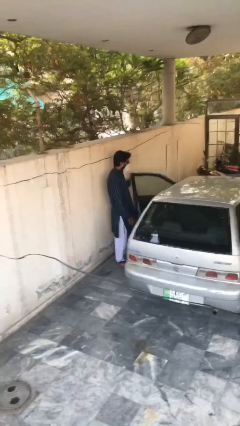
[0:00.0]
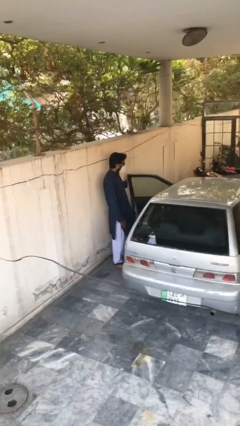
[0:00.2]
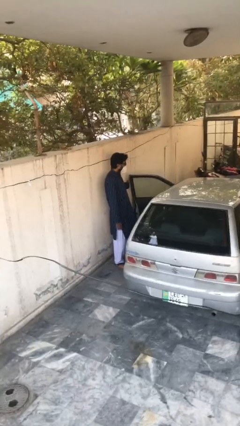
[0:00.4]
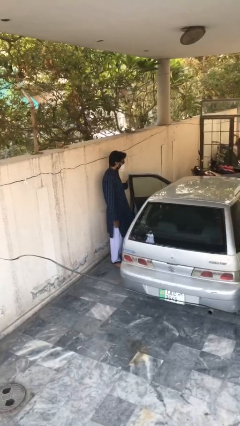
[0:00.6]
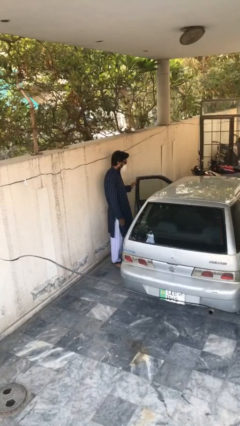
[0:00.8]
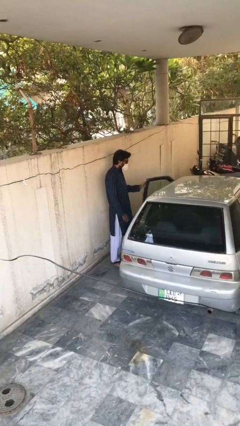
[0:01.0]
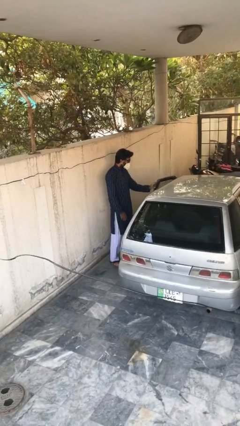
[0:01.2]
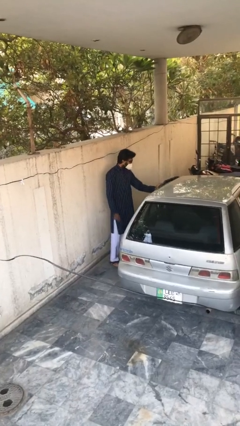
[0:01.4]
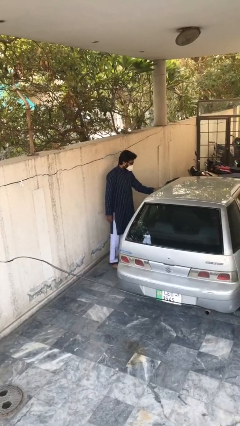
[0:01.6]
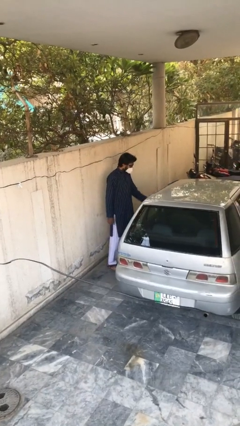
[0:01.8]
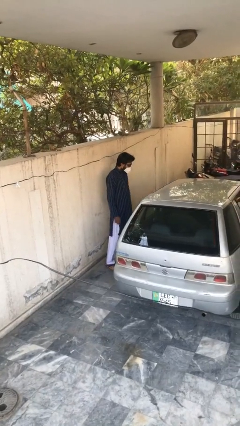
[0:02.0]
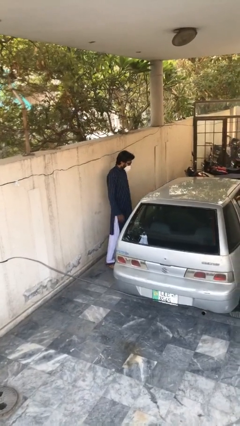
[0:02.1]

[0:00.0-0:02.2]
person closes car door

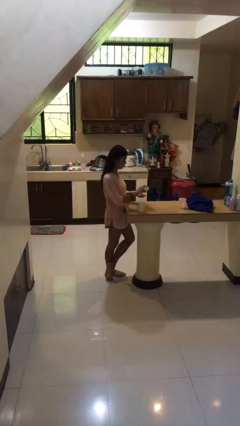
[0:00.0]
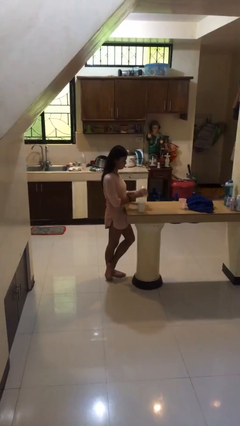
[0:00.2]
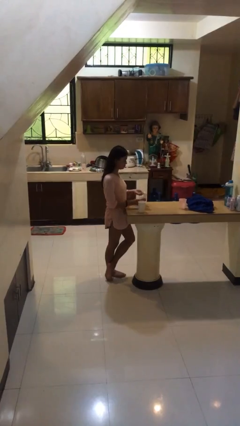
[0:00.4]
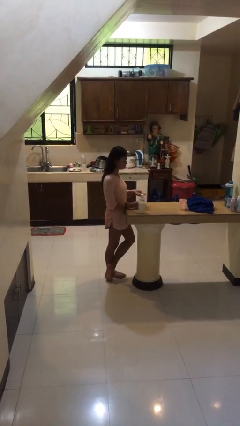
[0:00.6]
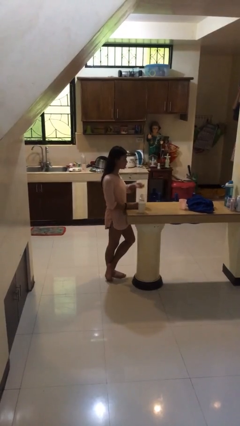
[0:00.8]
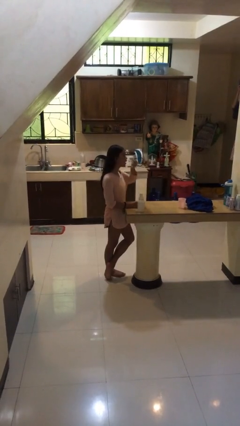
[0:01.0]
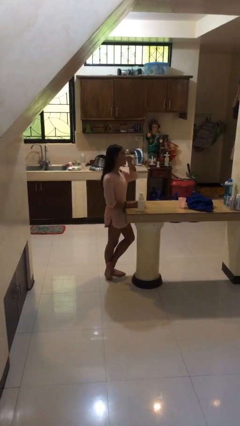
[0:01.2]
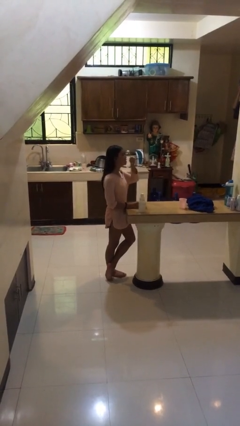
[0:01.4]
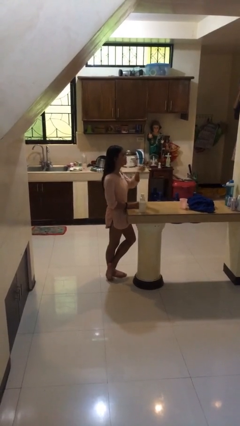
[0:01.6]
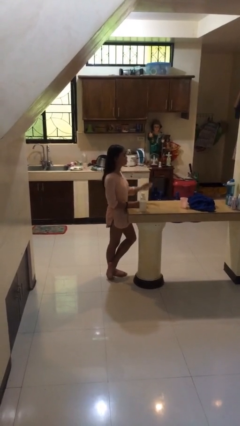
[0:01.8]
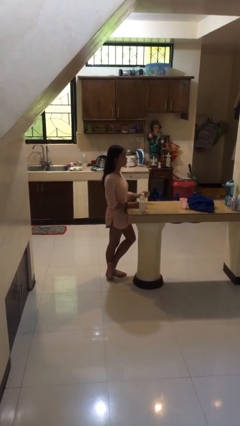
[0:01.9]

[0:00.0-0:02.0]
person takes medicine pills

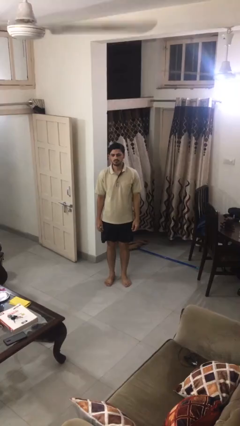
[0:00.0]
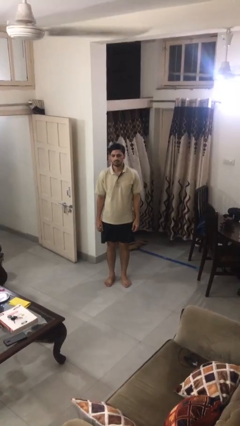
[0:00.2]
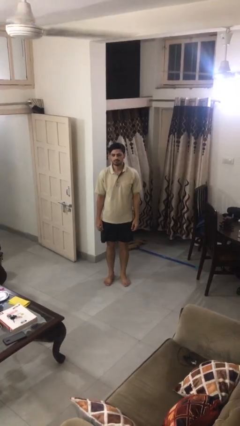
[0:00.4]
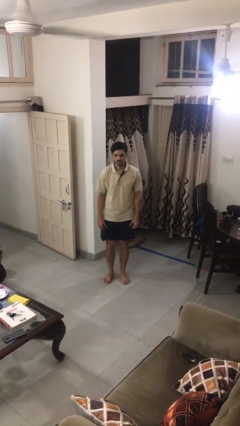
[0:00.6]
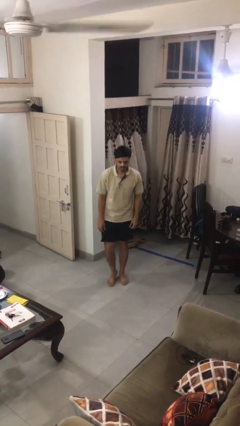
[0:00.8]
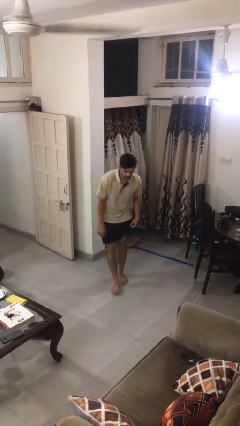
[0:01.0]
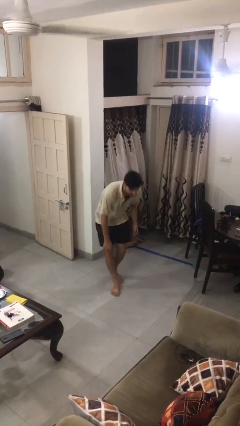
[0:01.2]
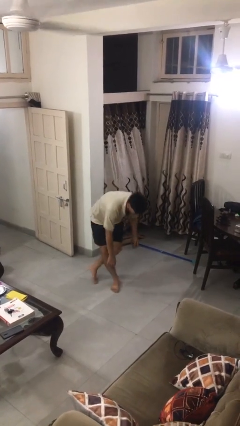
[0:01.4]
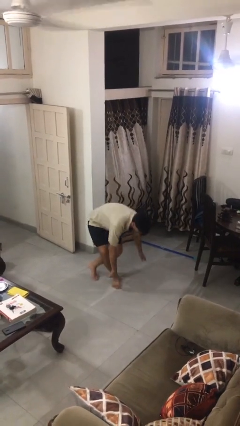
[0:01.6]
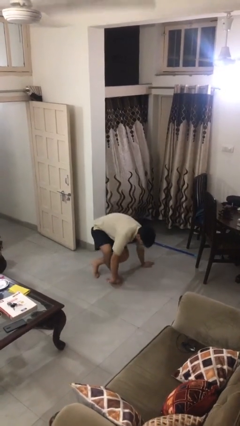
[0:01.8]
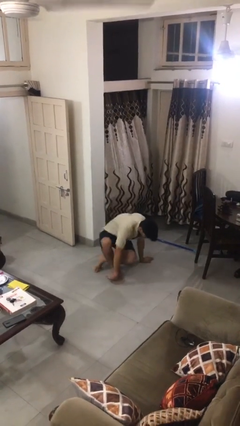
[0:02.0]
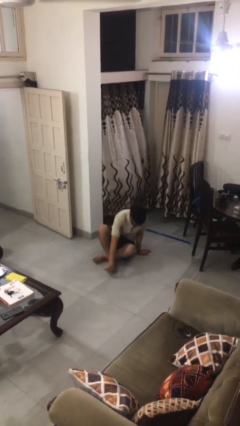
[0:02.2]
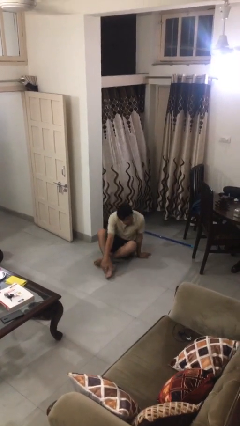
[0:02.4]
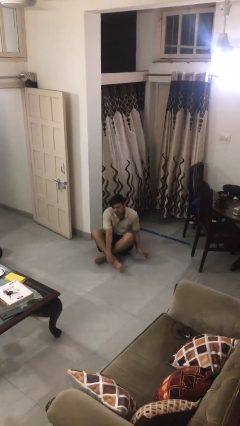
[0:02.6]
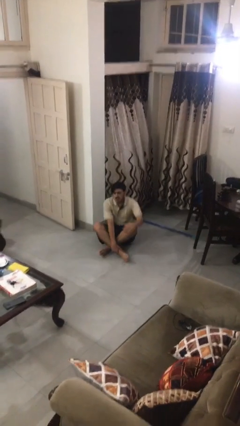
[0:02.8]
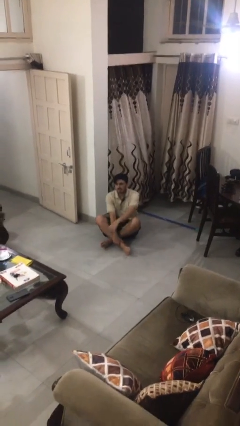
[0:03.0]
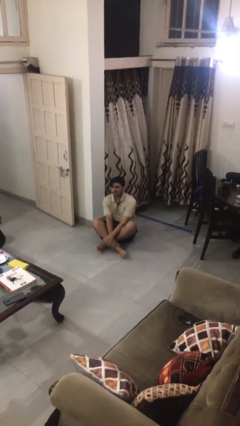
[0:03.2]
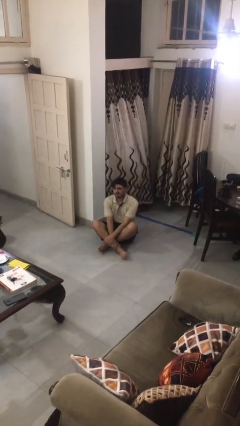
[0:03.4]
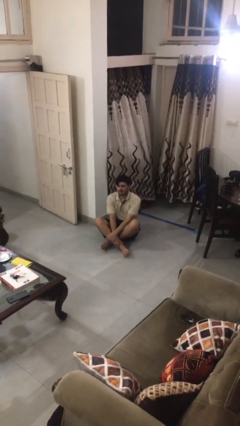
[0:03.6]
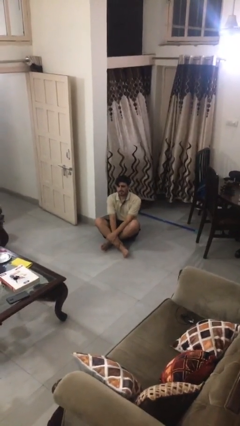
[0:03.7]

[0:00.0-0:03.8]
person sits crisscross

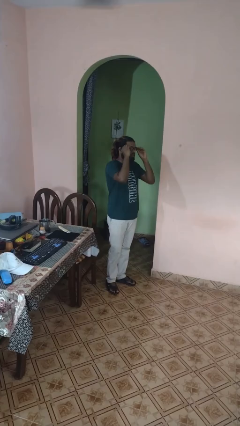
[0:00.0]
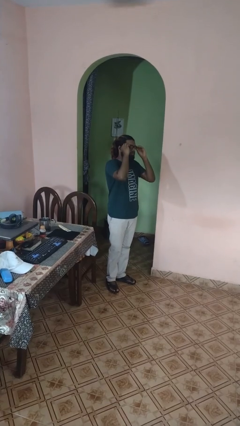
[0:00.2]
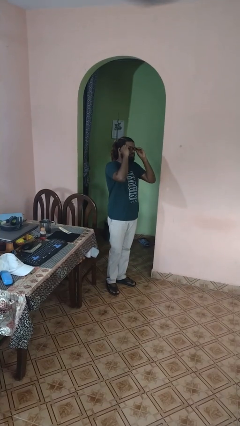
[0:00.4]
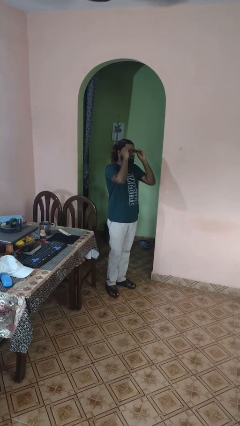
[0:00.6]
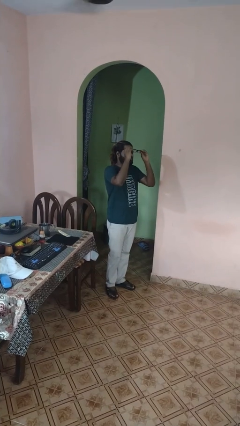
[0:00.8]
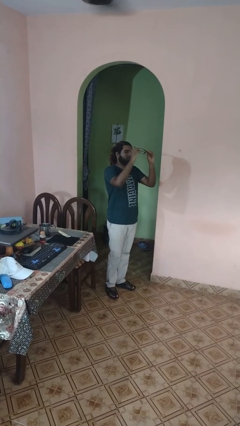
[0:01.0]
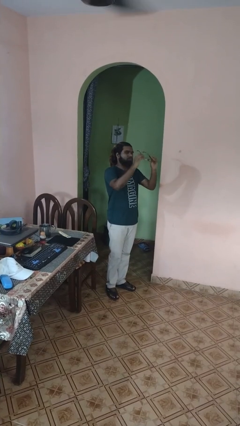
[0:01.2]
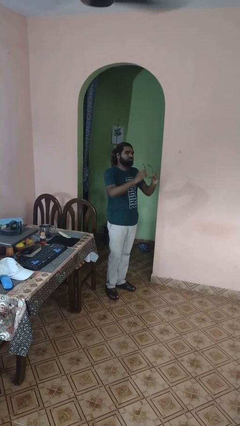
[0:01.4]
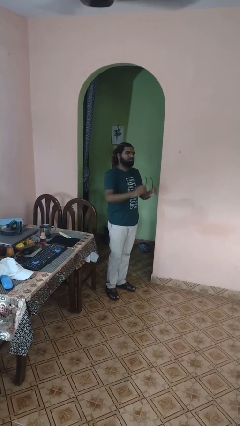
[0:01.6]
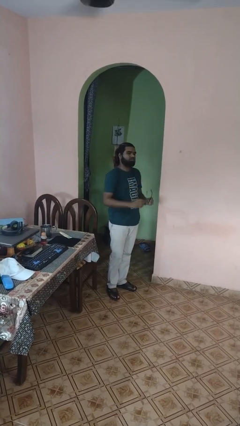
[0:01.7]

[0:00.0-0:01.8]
person takes off glasses

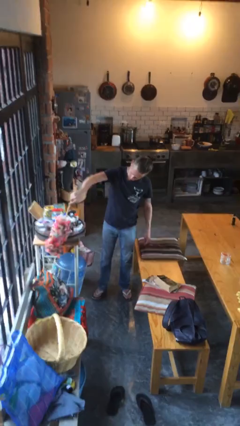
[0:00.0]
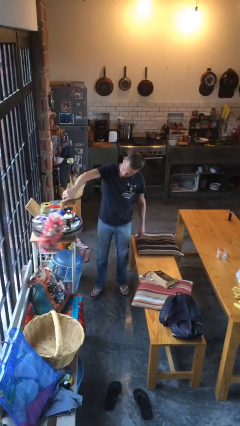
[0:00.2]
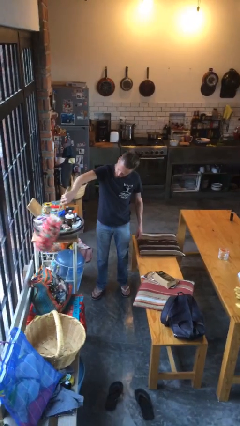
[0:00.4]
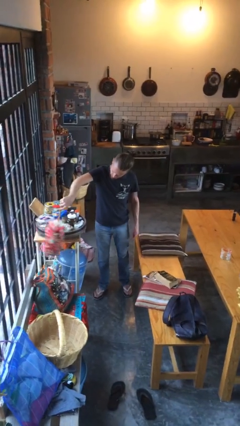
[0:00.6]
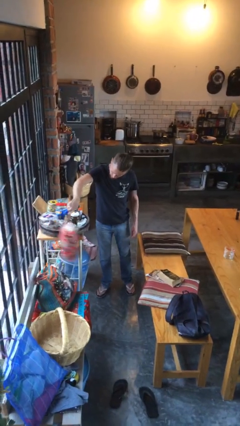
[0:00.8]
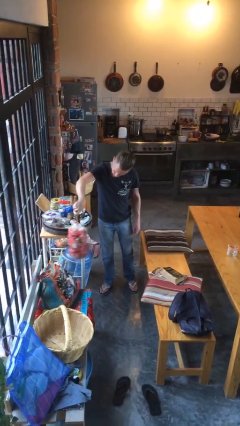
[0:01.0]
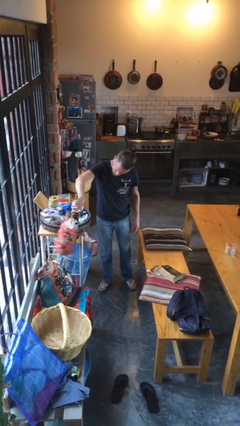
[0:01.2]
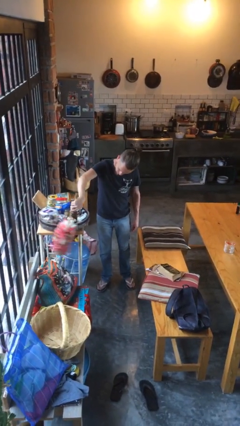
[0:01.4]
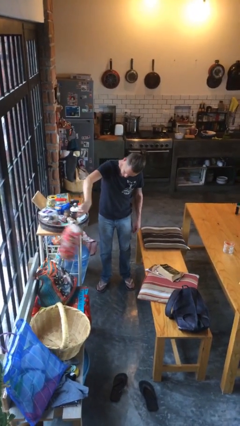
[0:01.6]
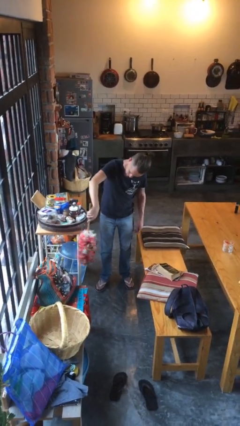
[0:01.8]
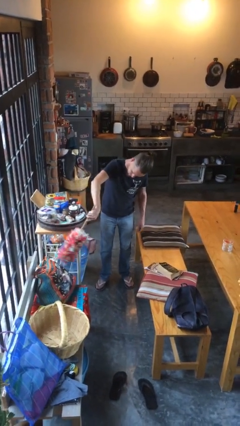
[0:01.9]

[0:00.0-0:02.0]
person dusts furniture

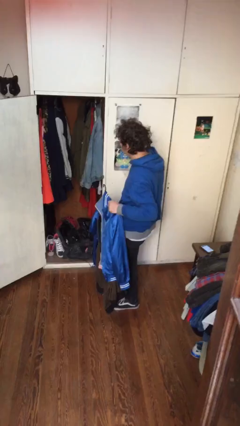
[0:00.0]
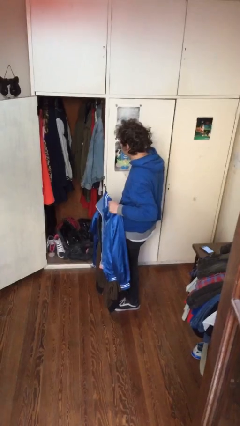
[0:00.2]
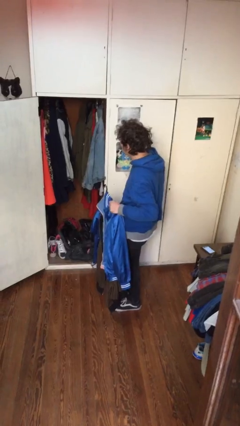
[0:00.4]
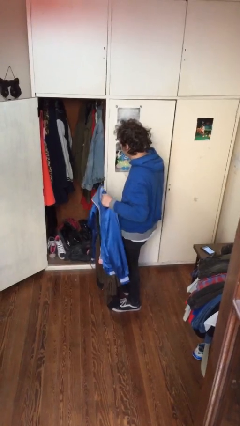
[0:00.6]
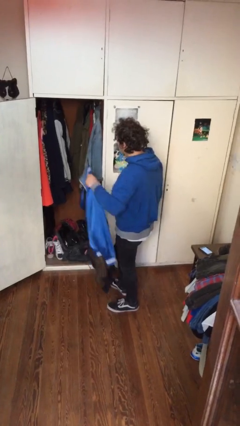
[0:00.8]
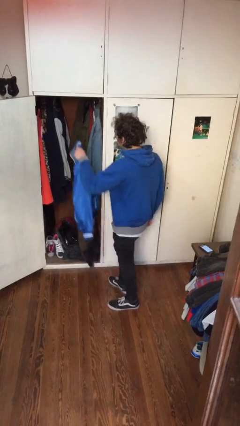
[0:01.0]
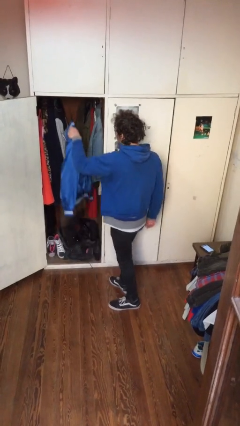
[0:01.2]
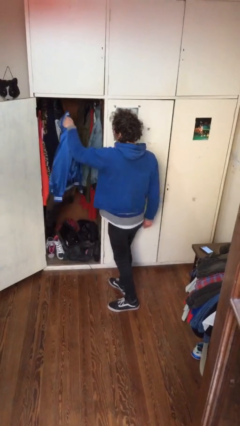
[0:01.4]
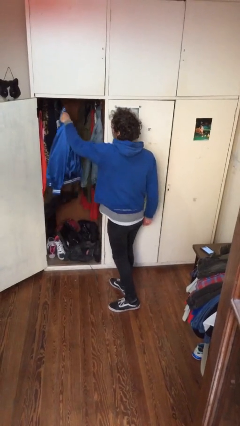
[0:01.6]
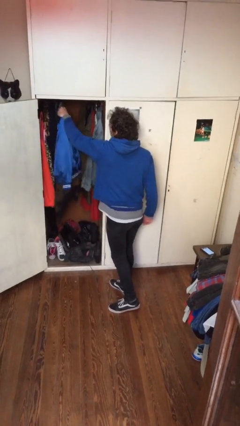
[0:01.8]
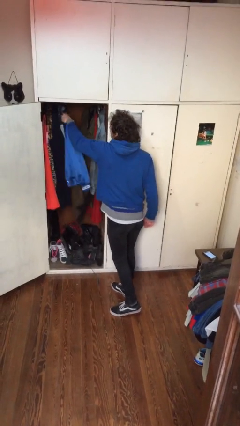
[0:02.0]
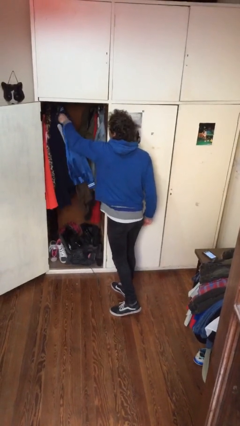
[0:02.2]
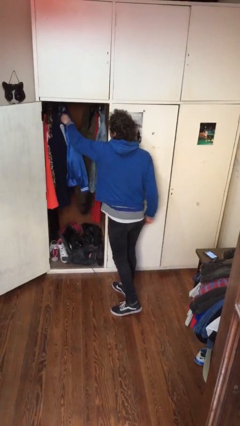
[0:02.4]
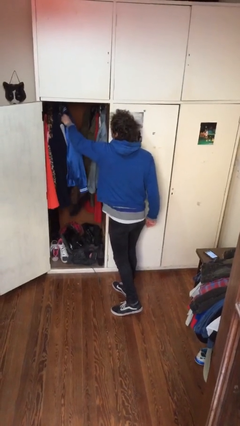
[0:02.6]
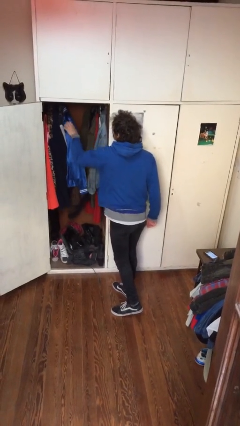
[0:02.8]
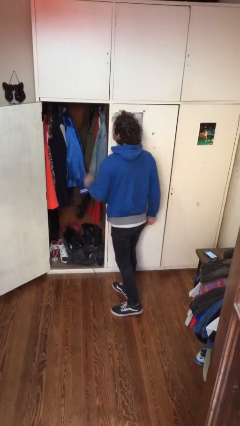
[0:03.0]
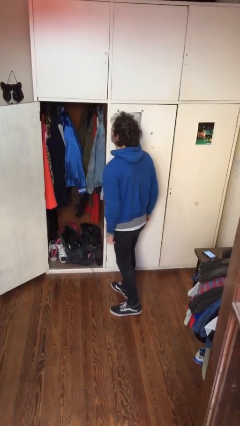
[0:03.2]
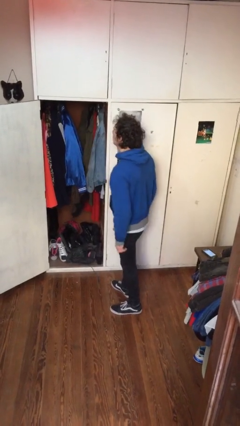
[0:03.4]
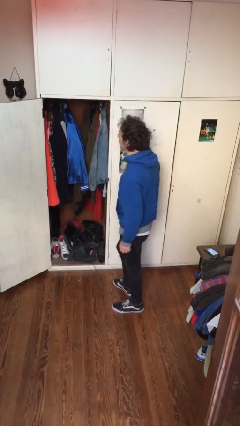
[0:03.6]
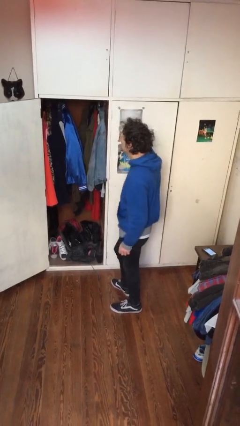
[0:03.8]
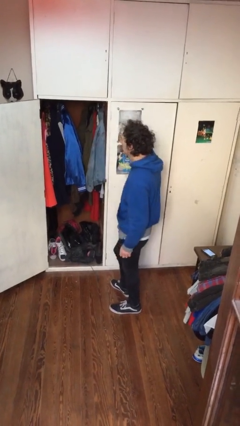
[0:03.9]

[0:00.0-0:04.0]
person puts clothes into closet

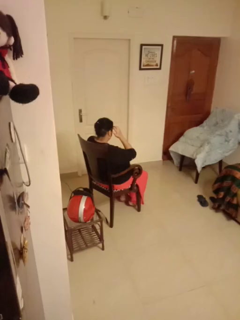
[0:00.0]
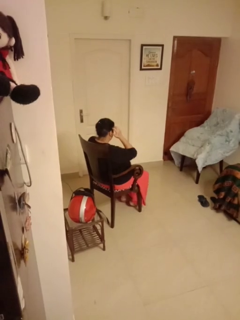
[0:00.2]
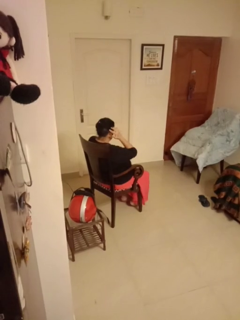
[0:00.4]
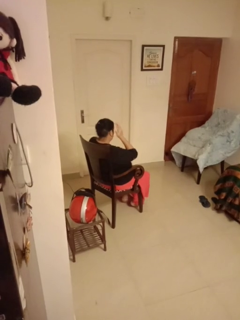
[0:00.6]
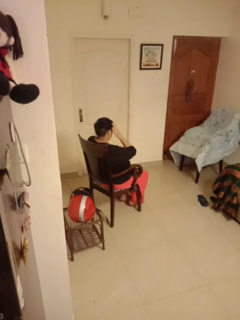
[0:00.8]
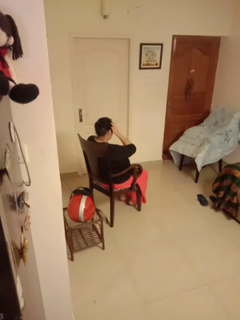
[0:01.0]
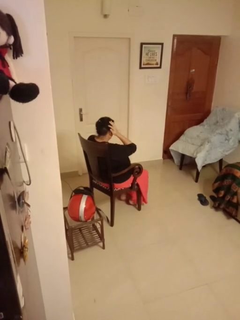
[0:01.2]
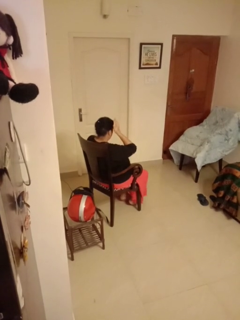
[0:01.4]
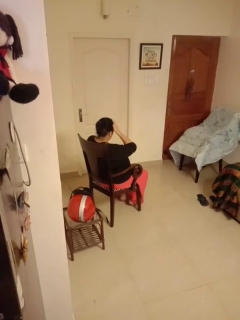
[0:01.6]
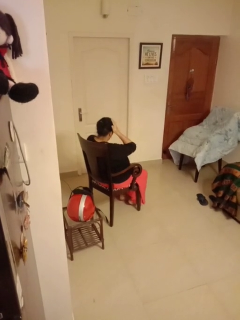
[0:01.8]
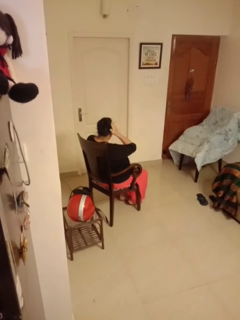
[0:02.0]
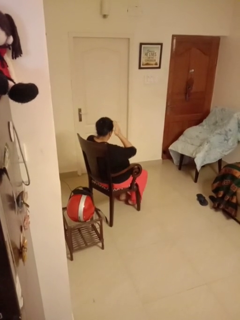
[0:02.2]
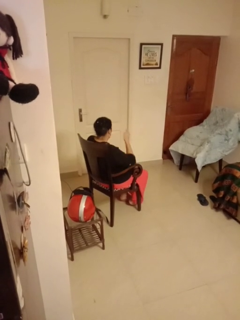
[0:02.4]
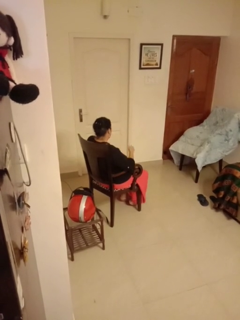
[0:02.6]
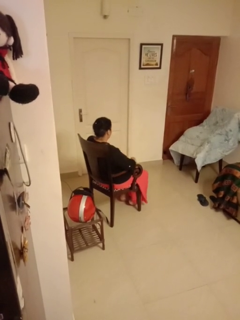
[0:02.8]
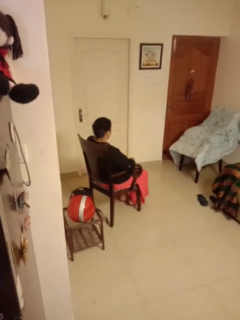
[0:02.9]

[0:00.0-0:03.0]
person strokes hair
